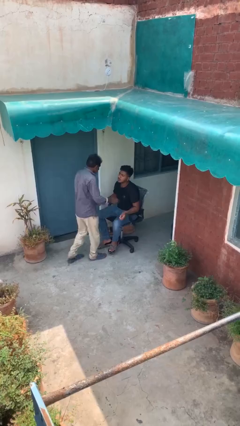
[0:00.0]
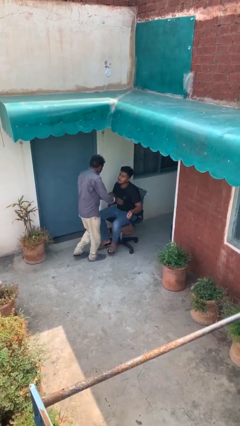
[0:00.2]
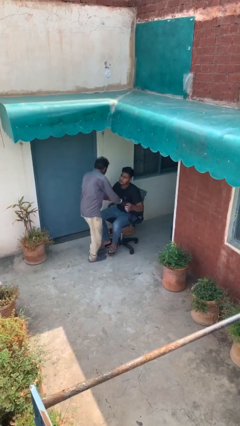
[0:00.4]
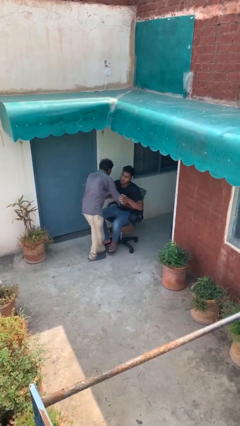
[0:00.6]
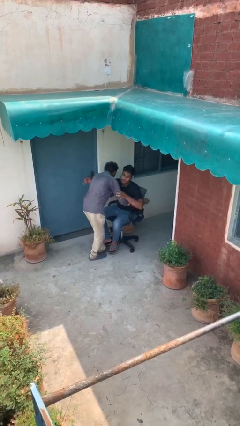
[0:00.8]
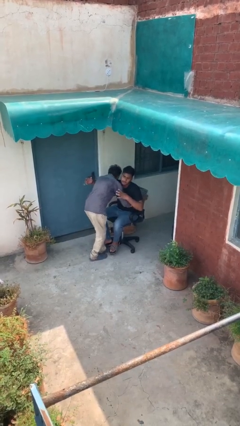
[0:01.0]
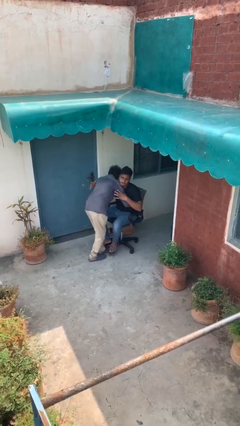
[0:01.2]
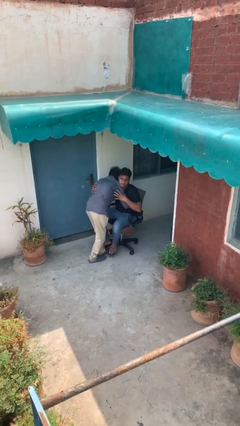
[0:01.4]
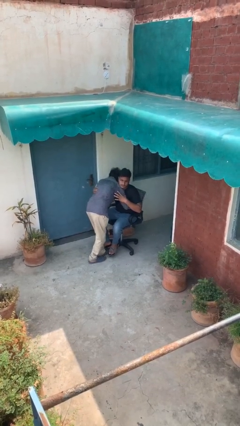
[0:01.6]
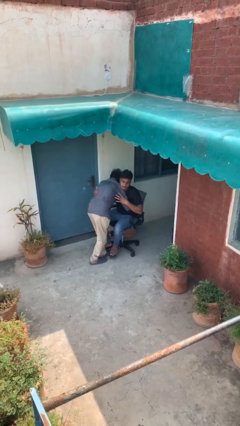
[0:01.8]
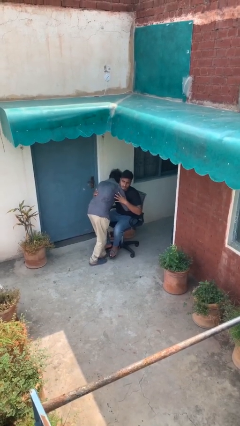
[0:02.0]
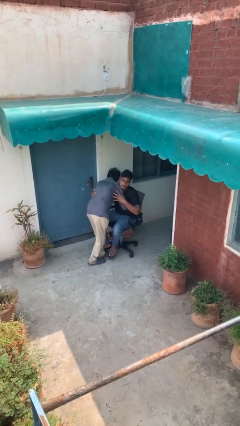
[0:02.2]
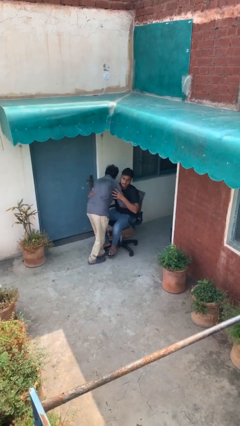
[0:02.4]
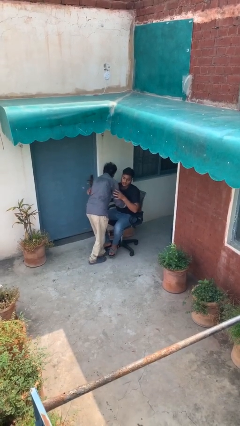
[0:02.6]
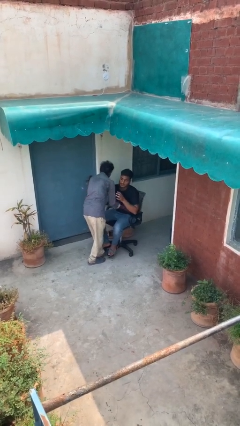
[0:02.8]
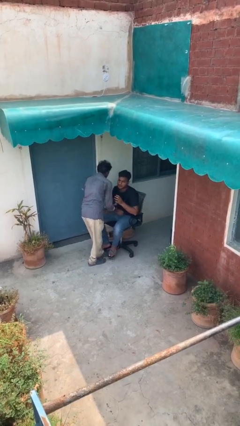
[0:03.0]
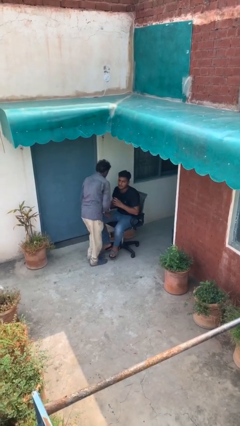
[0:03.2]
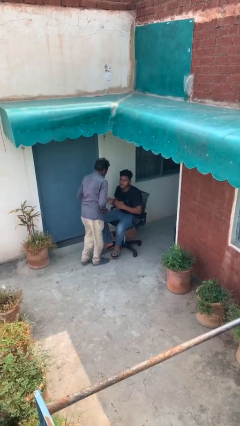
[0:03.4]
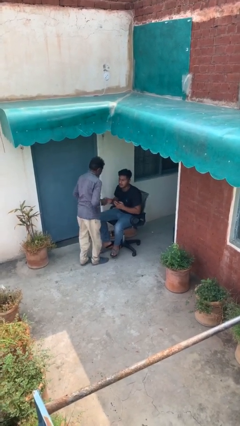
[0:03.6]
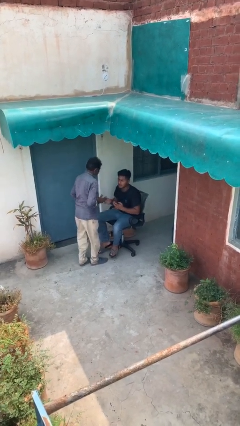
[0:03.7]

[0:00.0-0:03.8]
person embraces person

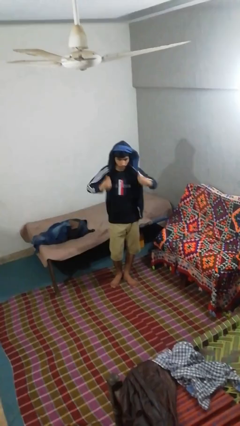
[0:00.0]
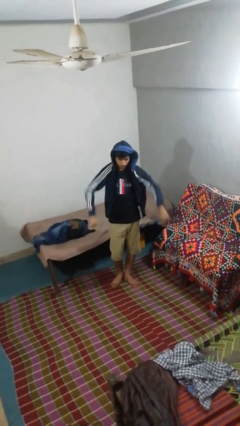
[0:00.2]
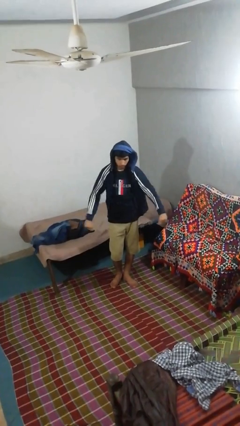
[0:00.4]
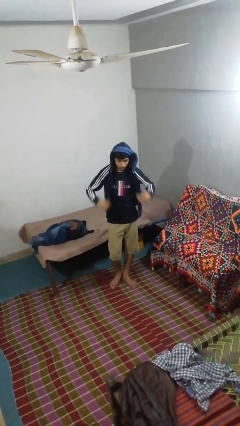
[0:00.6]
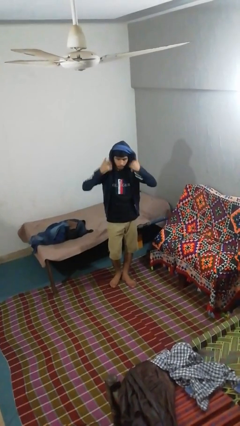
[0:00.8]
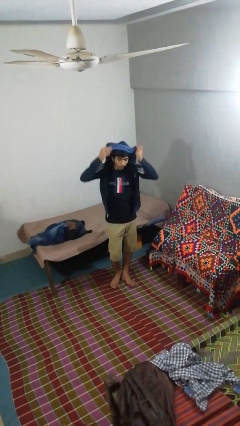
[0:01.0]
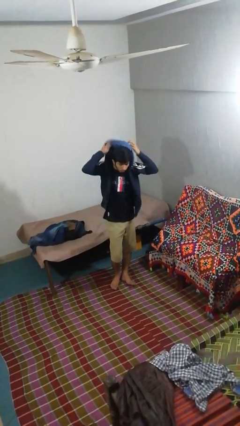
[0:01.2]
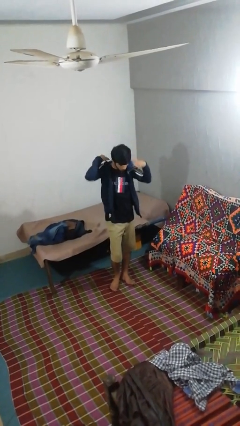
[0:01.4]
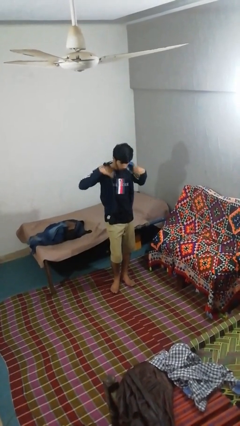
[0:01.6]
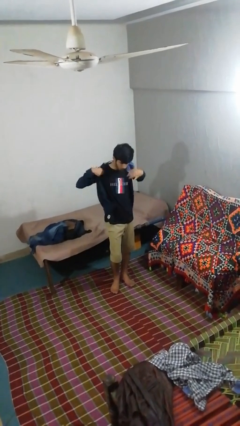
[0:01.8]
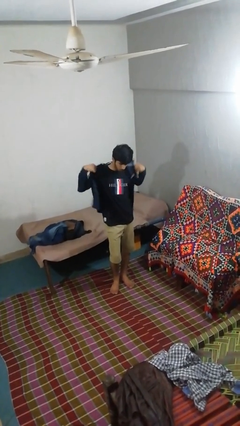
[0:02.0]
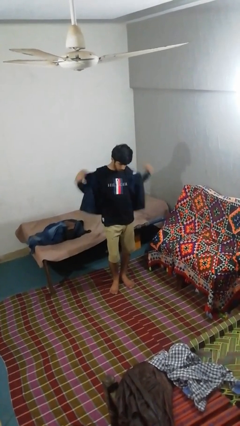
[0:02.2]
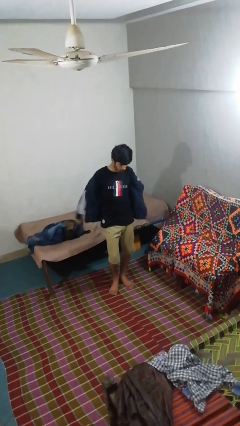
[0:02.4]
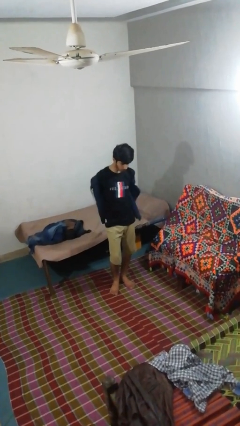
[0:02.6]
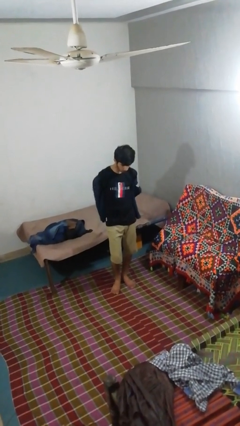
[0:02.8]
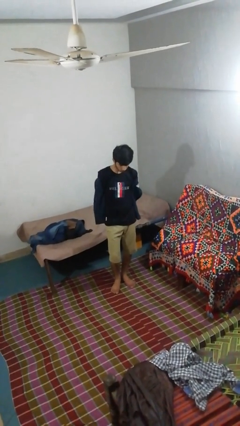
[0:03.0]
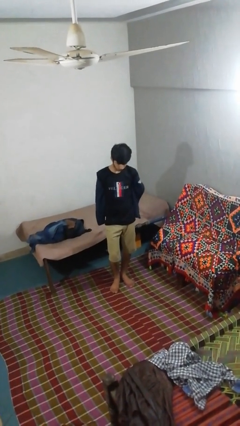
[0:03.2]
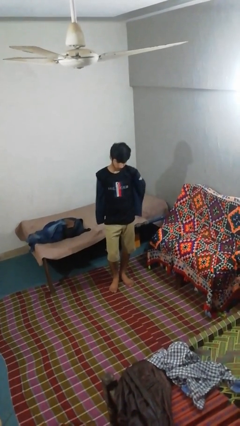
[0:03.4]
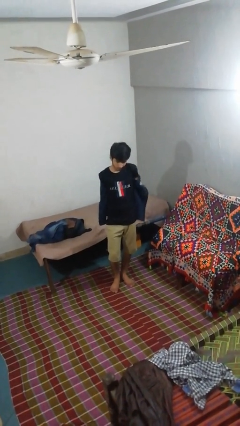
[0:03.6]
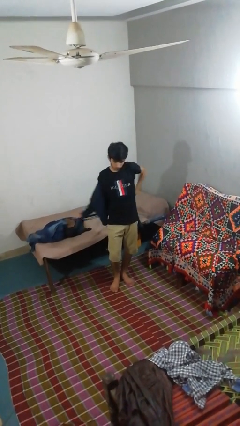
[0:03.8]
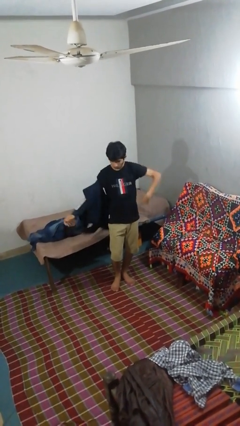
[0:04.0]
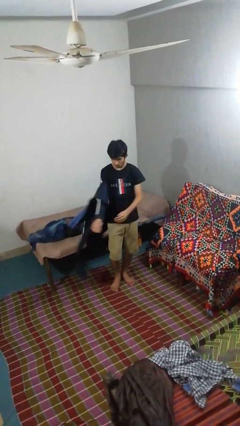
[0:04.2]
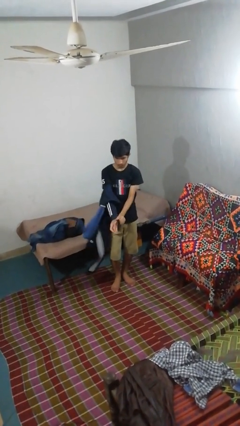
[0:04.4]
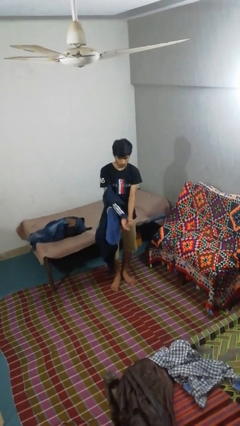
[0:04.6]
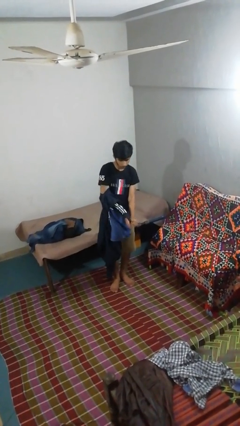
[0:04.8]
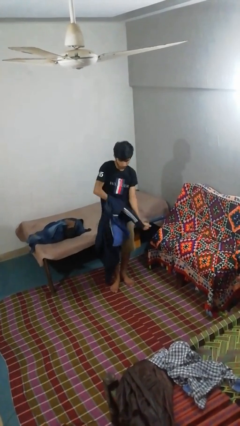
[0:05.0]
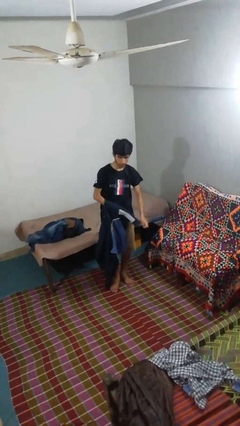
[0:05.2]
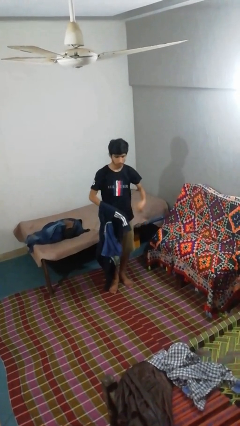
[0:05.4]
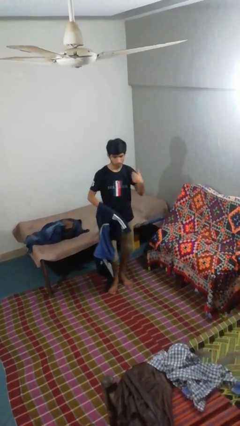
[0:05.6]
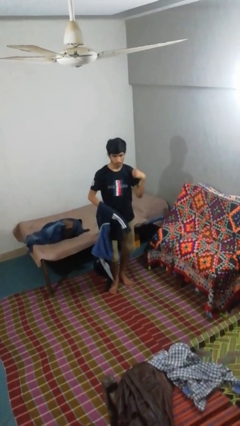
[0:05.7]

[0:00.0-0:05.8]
person takes off hoodie

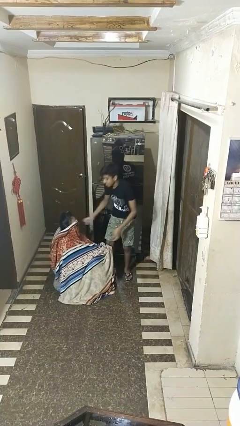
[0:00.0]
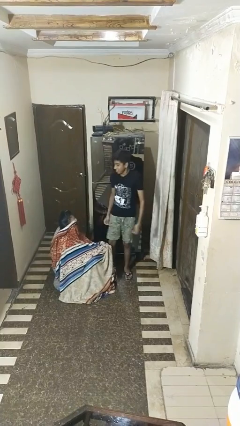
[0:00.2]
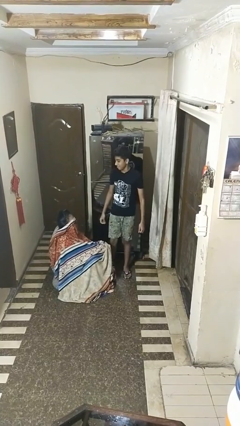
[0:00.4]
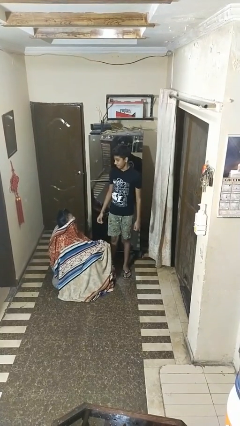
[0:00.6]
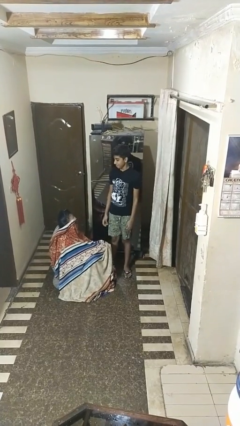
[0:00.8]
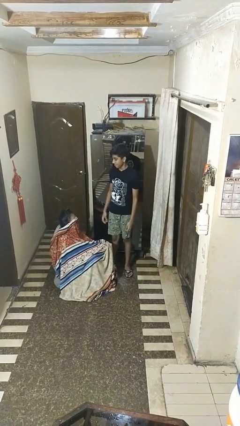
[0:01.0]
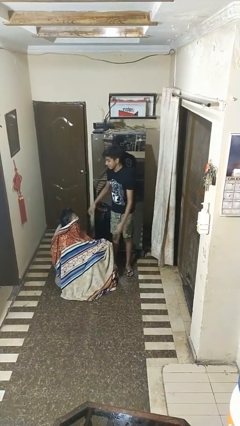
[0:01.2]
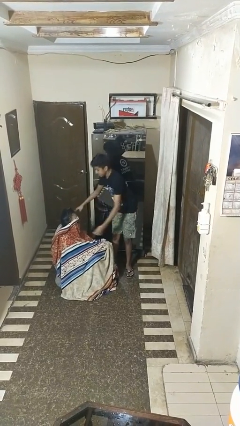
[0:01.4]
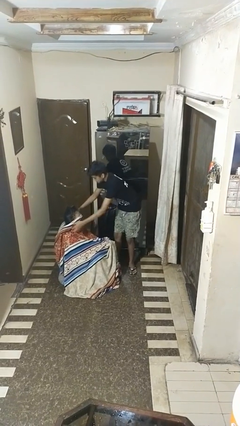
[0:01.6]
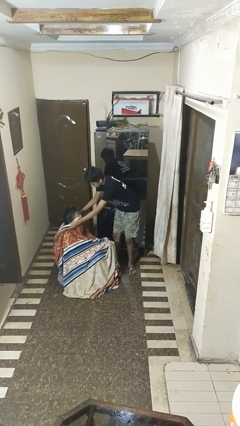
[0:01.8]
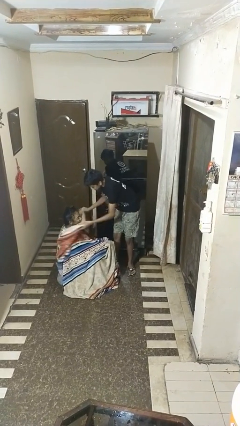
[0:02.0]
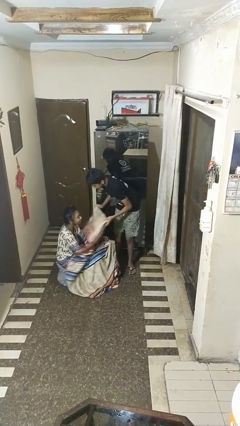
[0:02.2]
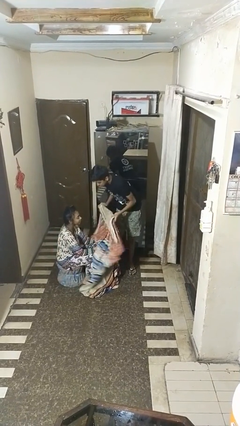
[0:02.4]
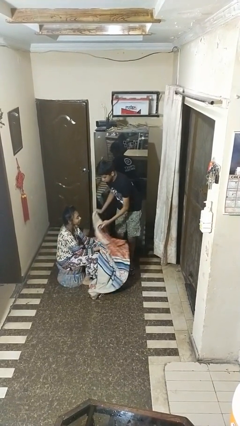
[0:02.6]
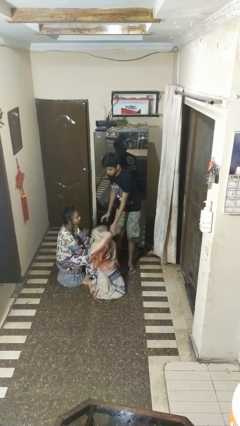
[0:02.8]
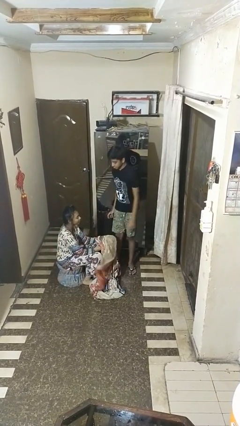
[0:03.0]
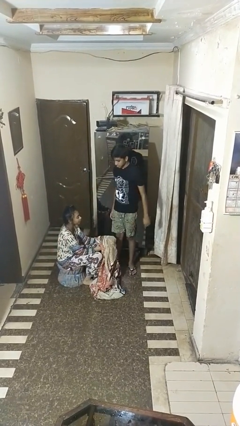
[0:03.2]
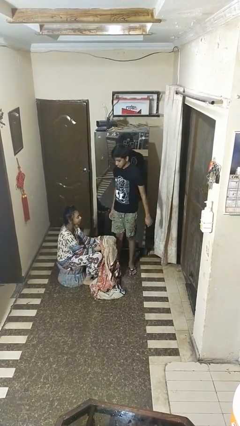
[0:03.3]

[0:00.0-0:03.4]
person uncovers friend with blanket

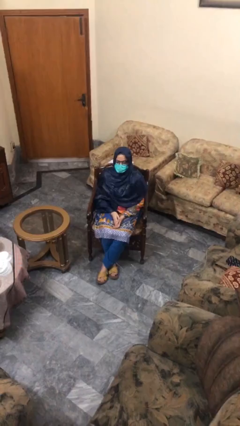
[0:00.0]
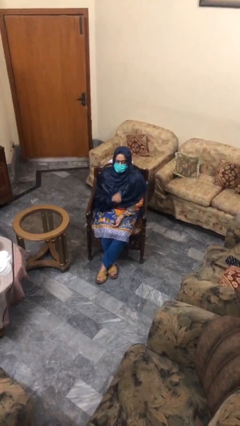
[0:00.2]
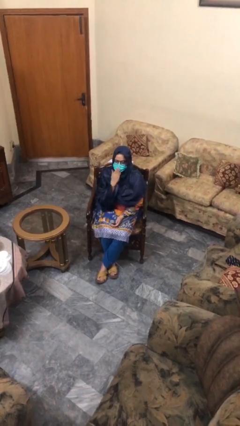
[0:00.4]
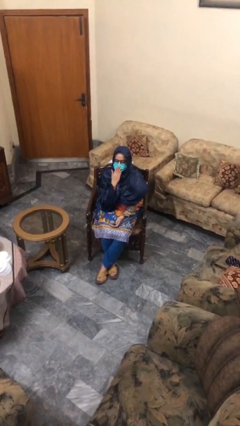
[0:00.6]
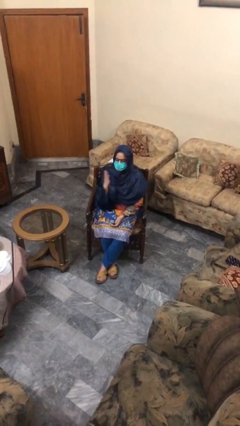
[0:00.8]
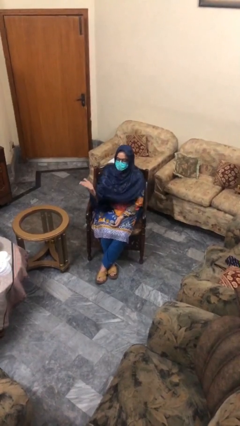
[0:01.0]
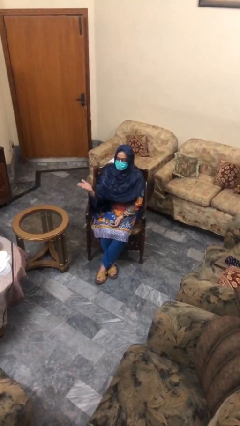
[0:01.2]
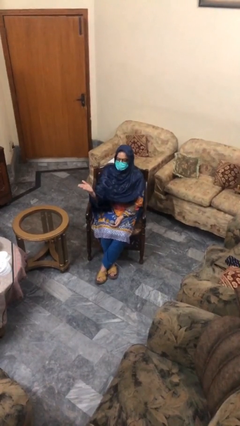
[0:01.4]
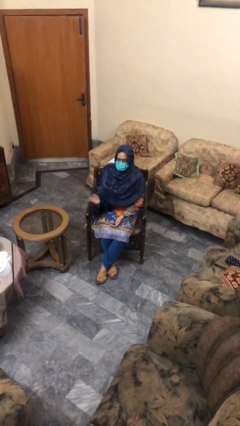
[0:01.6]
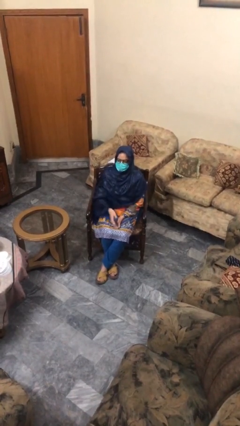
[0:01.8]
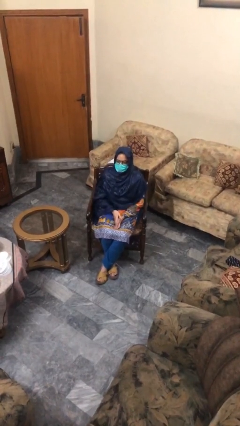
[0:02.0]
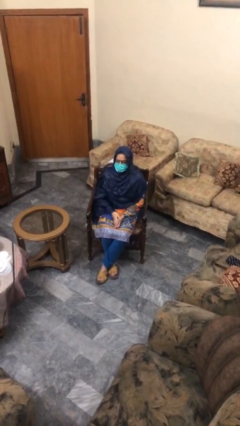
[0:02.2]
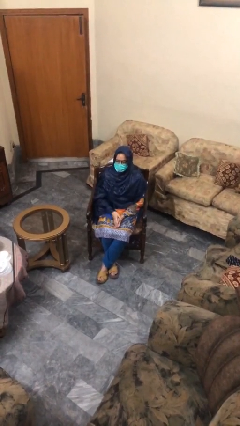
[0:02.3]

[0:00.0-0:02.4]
person gestures blow kiss

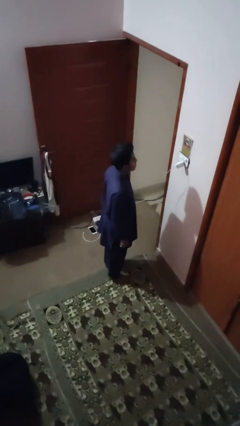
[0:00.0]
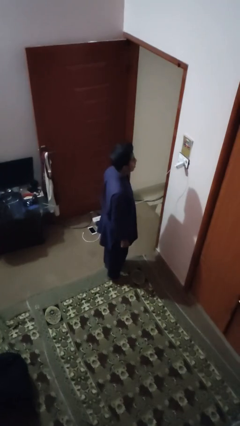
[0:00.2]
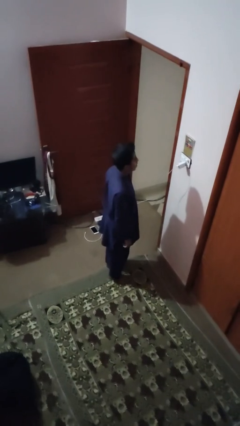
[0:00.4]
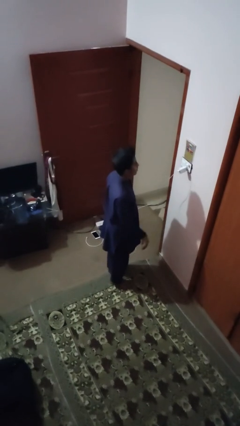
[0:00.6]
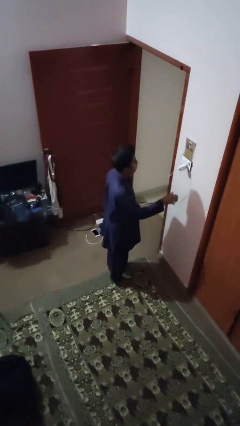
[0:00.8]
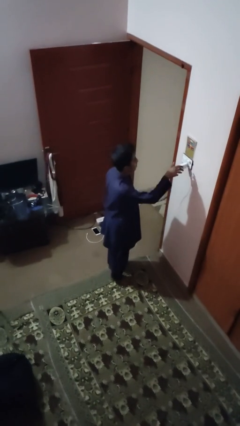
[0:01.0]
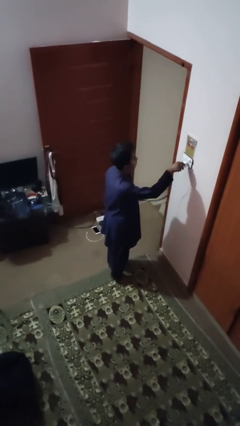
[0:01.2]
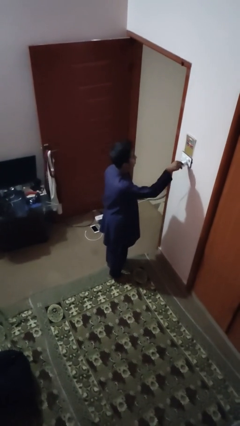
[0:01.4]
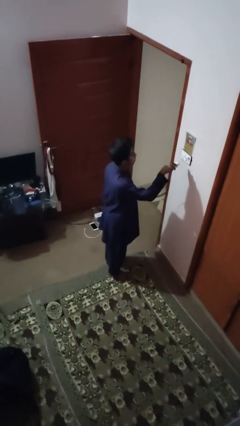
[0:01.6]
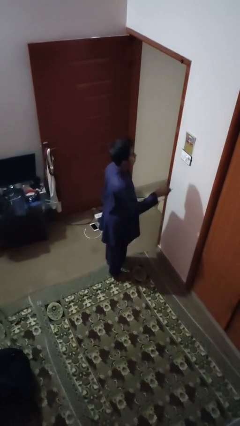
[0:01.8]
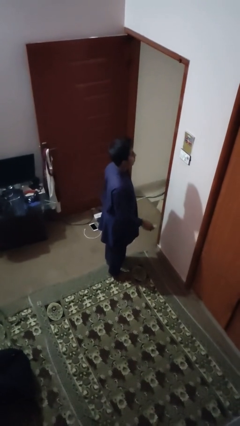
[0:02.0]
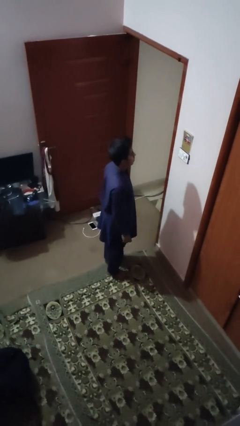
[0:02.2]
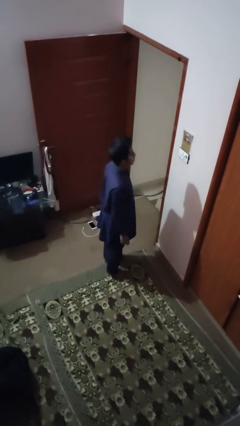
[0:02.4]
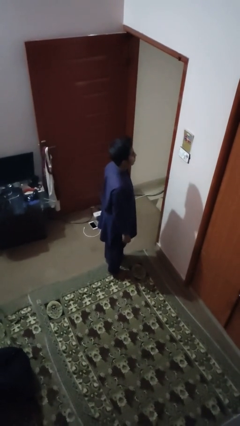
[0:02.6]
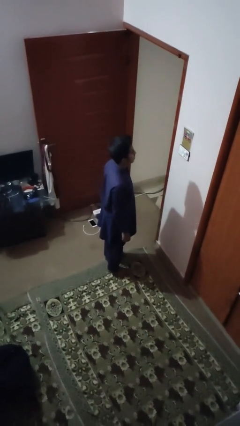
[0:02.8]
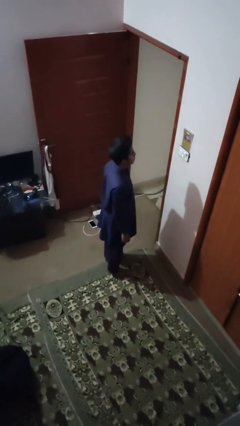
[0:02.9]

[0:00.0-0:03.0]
person unplugs from electrical socket
